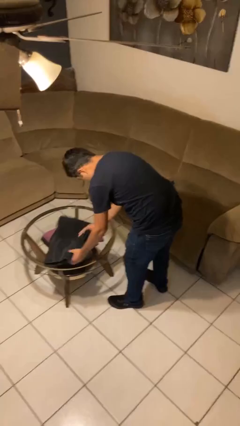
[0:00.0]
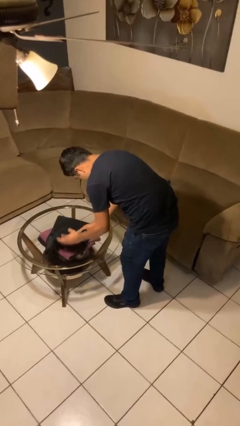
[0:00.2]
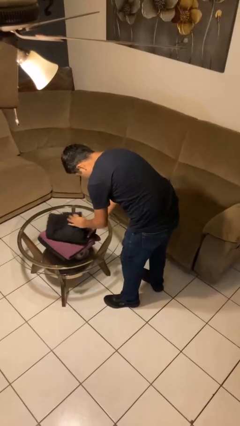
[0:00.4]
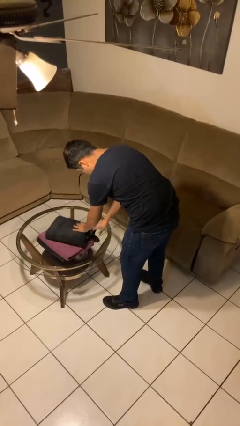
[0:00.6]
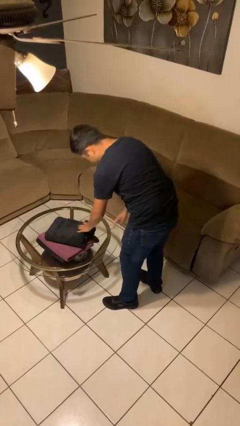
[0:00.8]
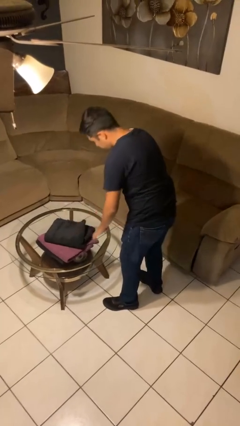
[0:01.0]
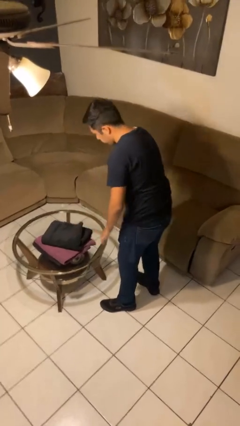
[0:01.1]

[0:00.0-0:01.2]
person folds towel

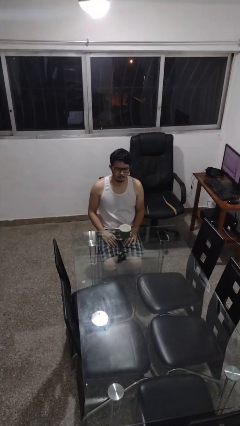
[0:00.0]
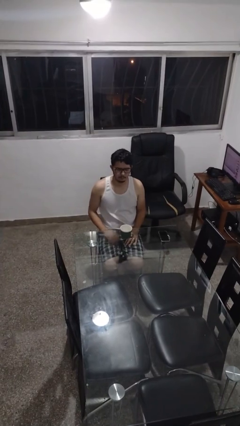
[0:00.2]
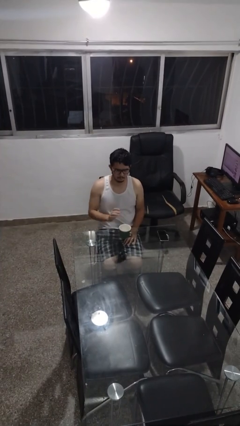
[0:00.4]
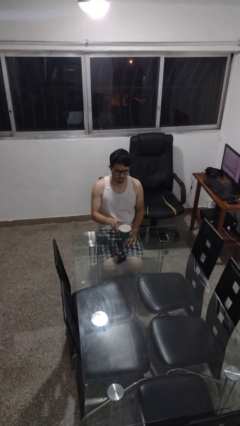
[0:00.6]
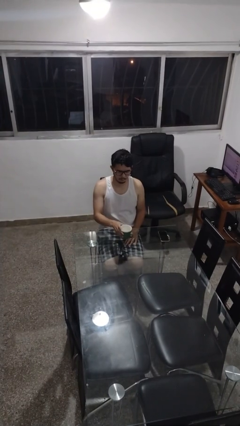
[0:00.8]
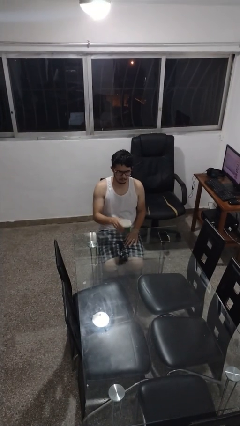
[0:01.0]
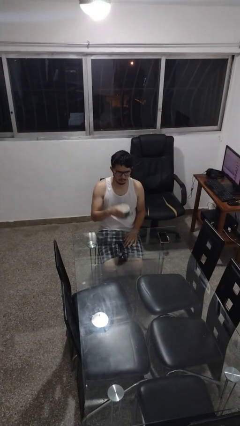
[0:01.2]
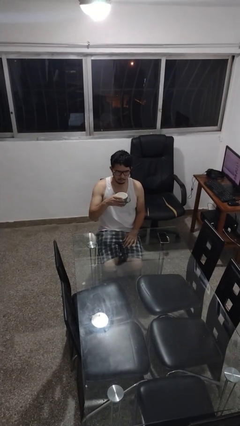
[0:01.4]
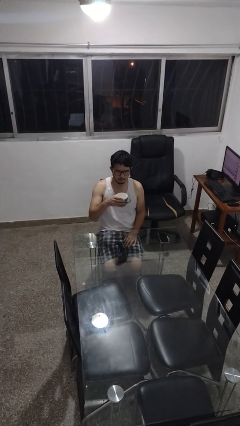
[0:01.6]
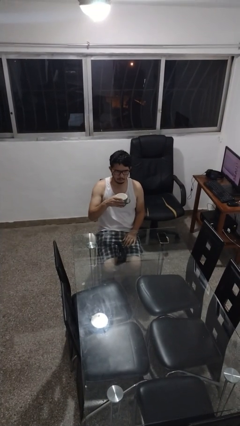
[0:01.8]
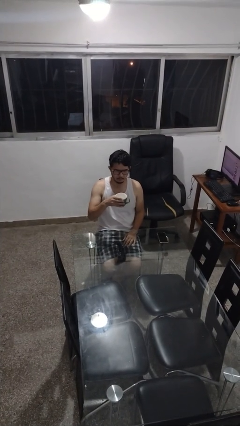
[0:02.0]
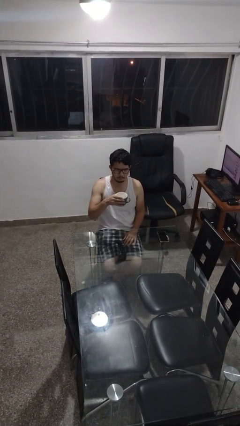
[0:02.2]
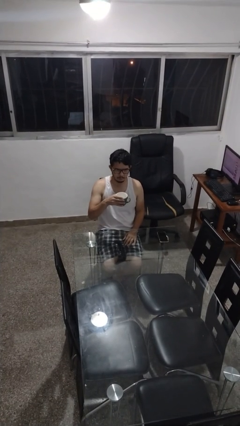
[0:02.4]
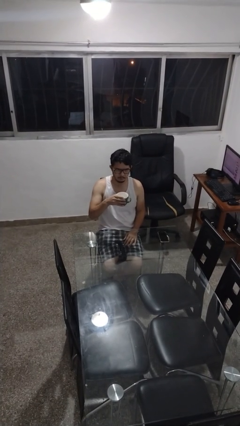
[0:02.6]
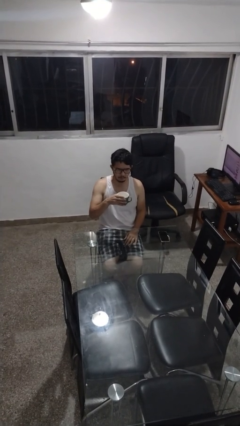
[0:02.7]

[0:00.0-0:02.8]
person picks up object from table

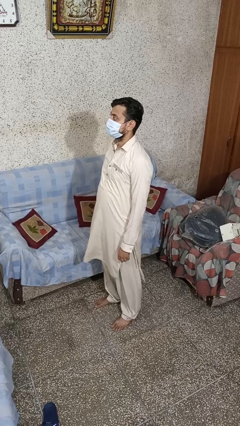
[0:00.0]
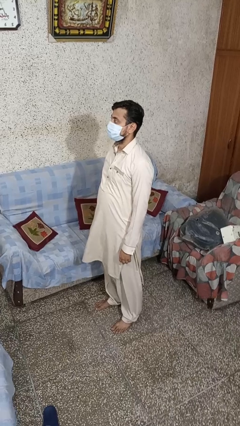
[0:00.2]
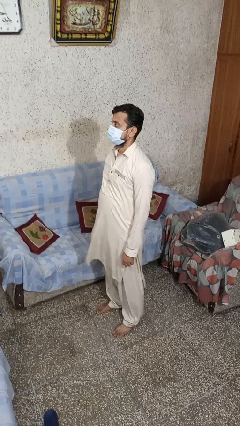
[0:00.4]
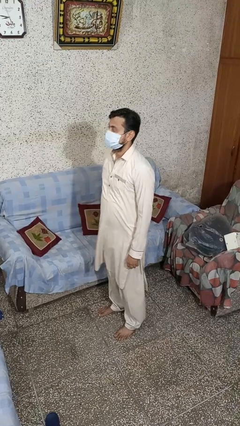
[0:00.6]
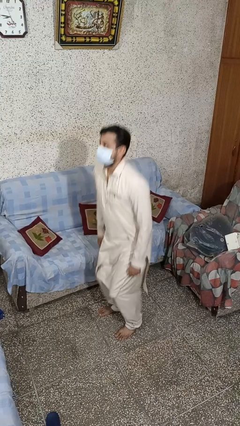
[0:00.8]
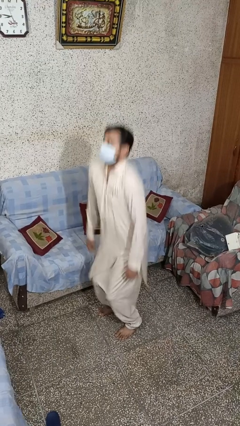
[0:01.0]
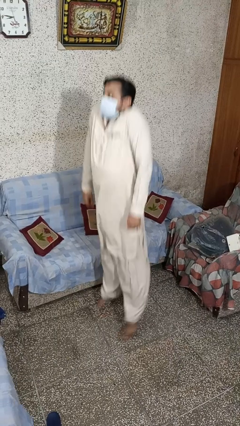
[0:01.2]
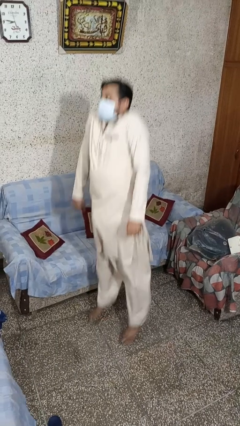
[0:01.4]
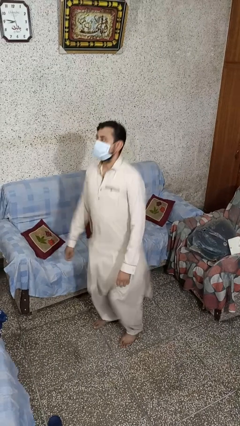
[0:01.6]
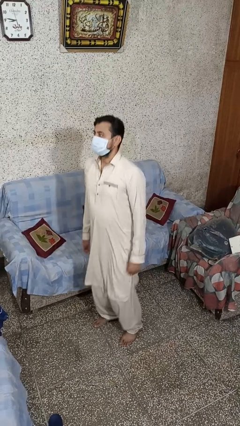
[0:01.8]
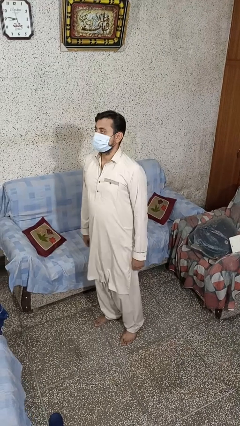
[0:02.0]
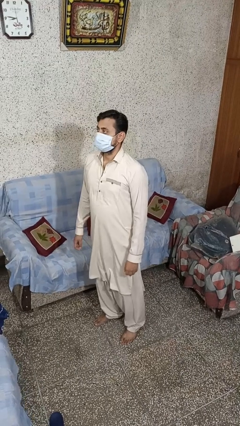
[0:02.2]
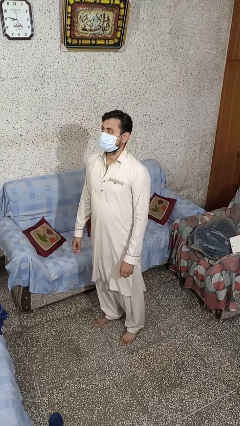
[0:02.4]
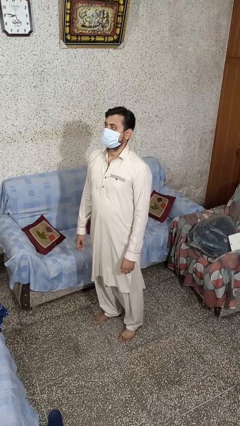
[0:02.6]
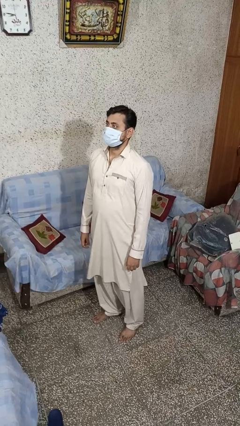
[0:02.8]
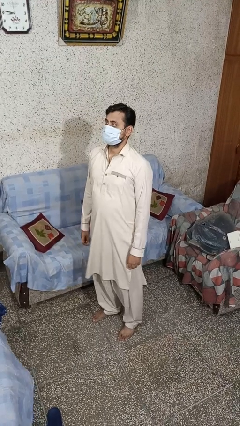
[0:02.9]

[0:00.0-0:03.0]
person jumps

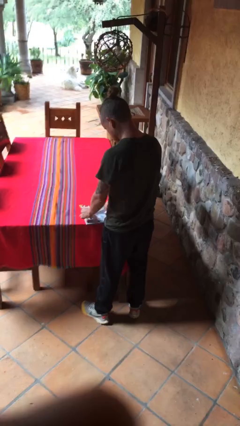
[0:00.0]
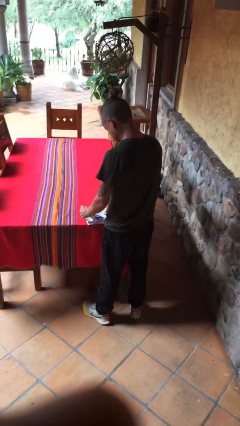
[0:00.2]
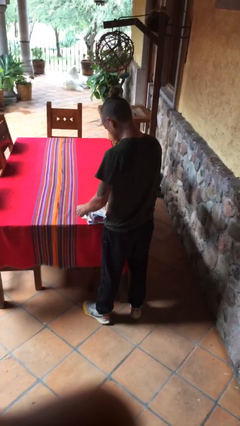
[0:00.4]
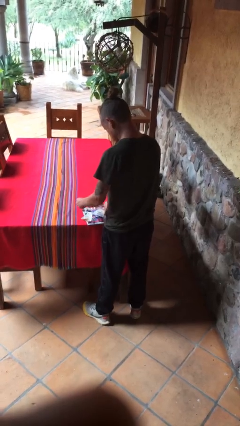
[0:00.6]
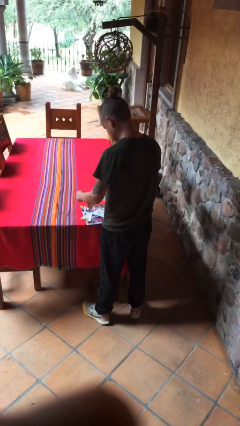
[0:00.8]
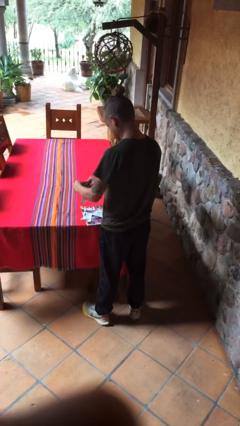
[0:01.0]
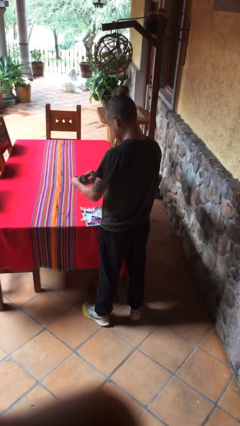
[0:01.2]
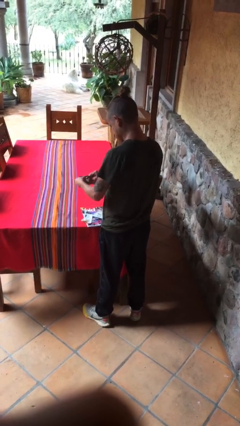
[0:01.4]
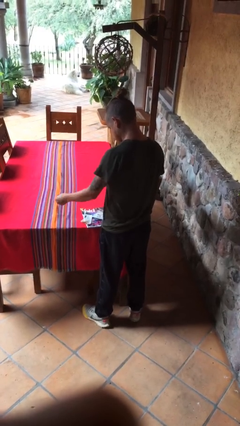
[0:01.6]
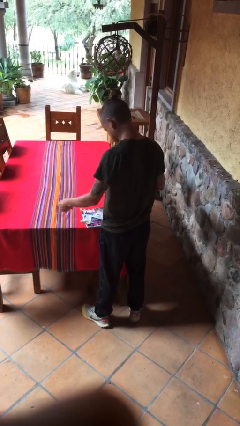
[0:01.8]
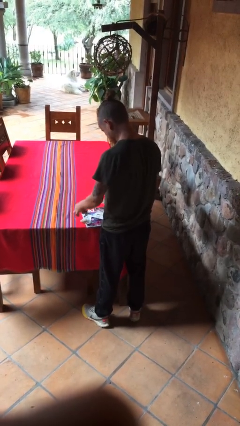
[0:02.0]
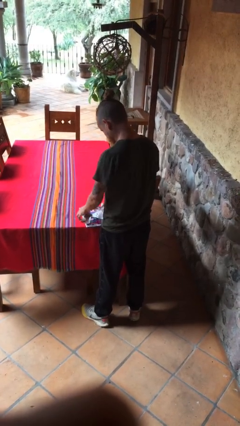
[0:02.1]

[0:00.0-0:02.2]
person tears paper

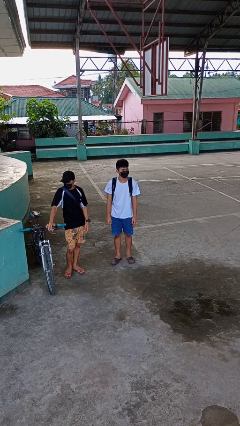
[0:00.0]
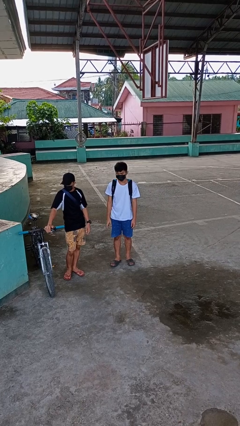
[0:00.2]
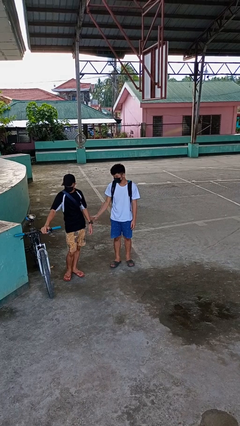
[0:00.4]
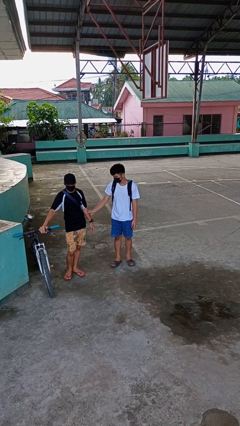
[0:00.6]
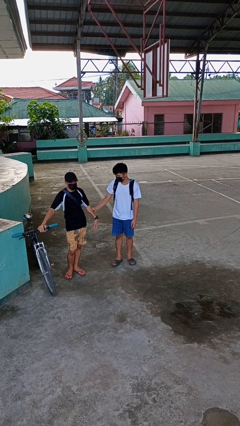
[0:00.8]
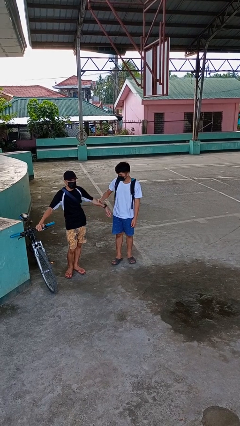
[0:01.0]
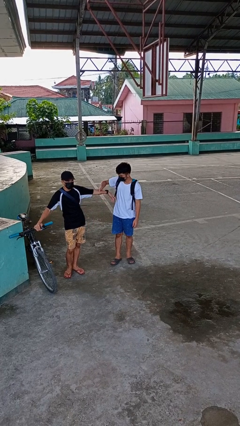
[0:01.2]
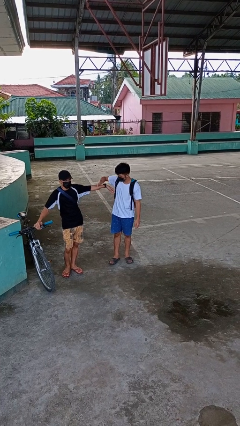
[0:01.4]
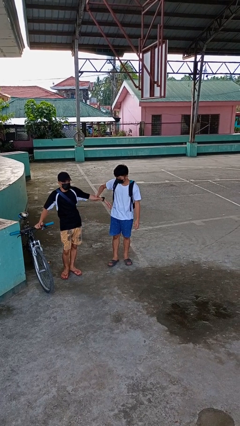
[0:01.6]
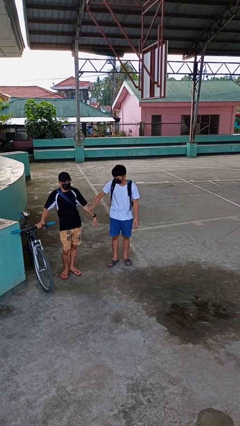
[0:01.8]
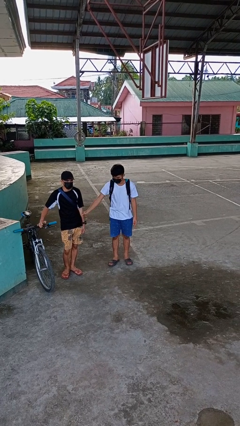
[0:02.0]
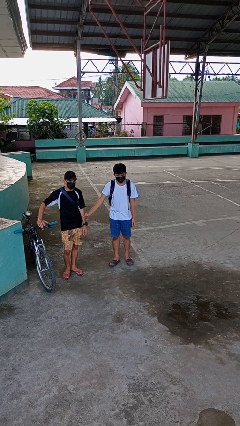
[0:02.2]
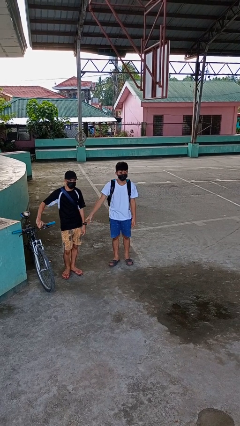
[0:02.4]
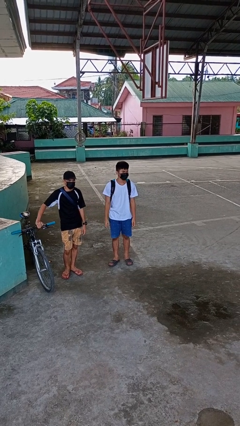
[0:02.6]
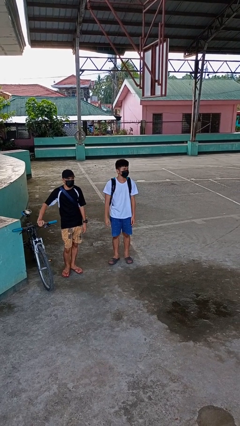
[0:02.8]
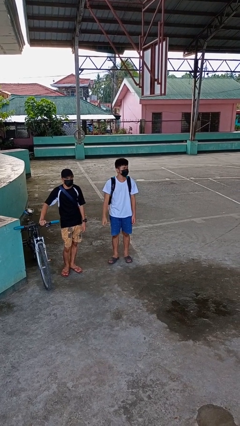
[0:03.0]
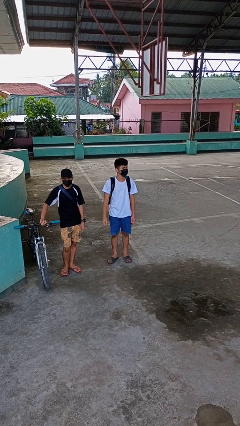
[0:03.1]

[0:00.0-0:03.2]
person grabs person by forearm

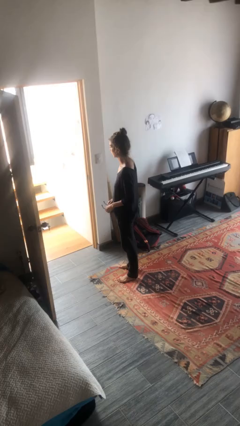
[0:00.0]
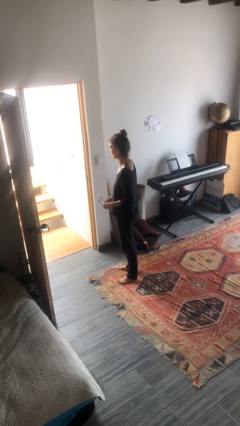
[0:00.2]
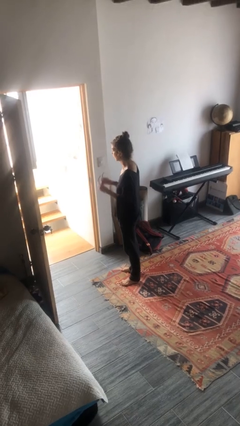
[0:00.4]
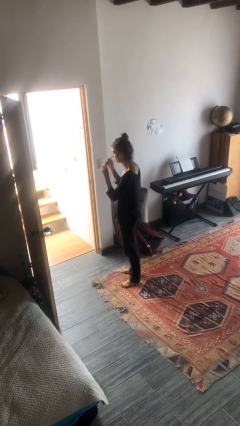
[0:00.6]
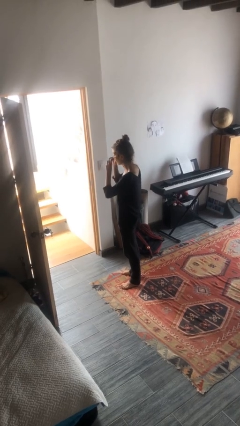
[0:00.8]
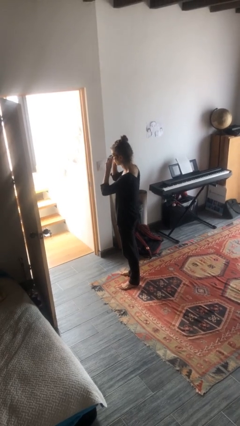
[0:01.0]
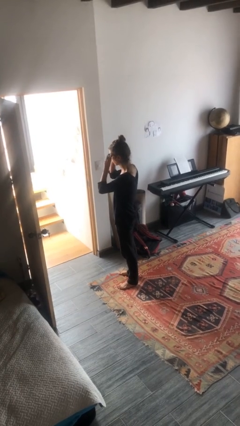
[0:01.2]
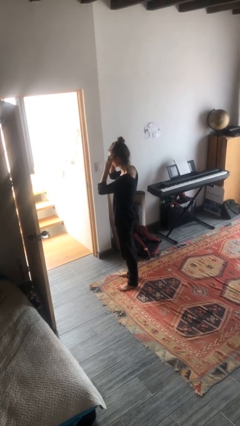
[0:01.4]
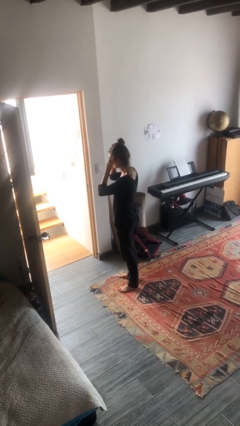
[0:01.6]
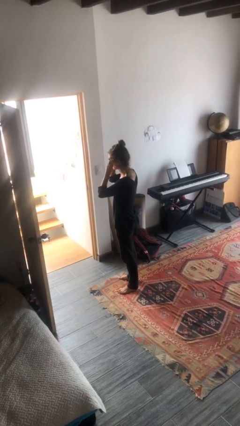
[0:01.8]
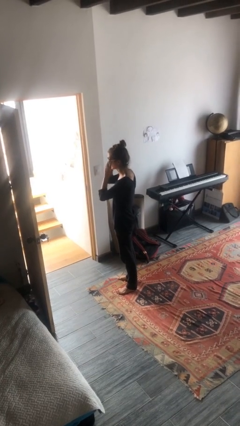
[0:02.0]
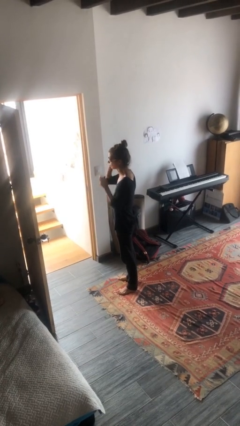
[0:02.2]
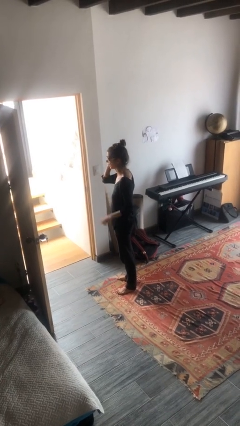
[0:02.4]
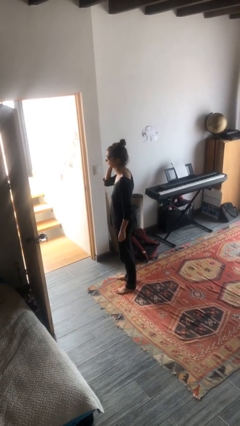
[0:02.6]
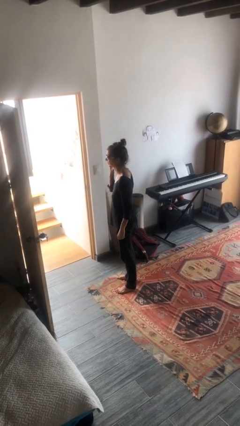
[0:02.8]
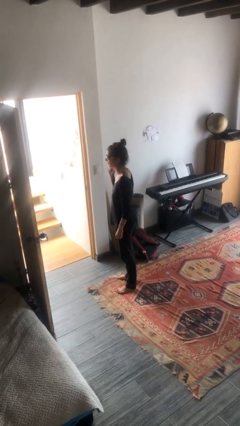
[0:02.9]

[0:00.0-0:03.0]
person puts on sunglasses

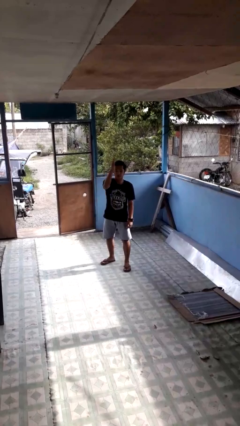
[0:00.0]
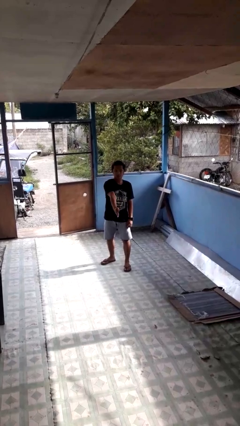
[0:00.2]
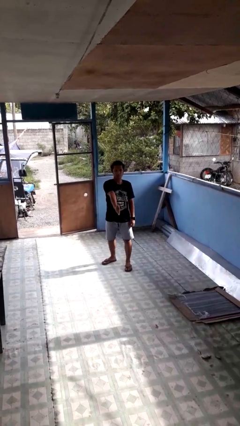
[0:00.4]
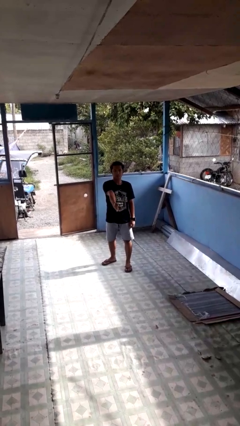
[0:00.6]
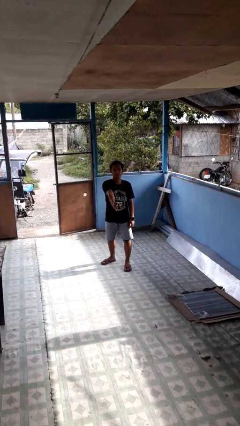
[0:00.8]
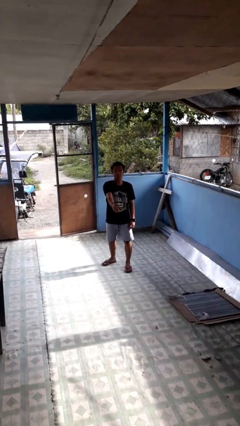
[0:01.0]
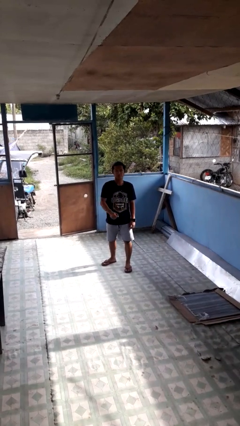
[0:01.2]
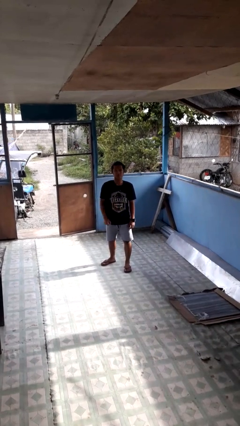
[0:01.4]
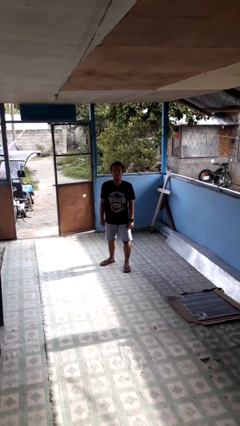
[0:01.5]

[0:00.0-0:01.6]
person karate chop

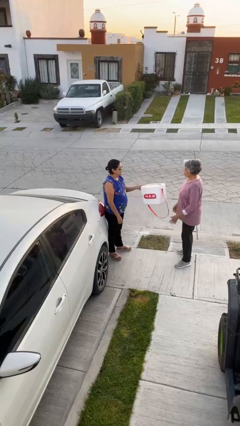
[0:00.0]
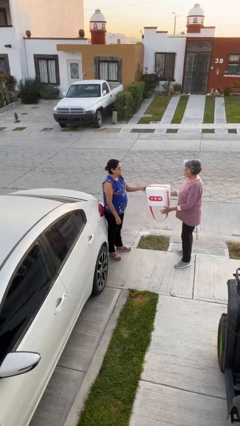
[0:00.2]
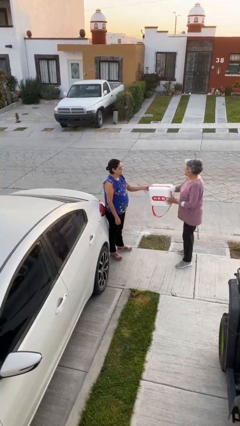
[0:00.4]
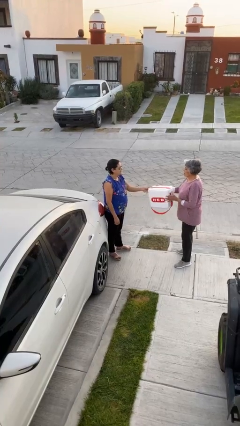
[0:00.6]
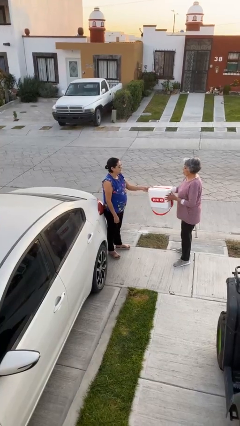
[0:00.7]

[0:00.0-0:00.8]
person transfers object to person
